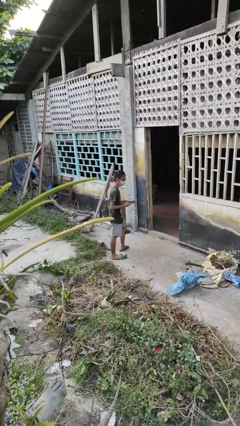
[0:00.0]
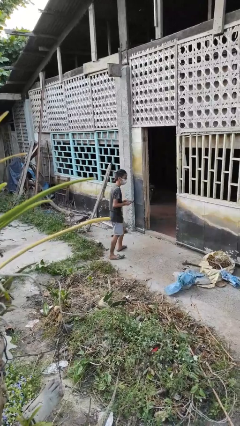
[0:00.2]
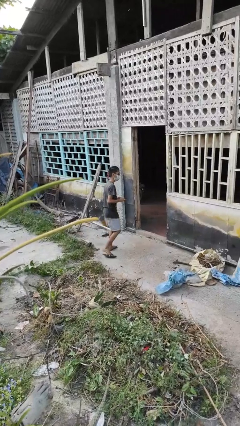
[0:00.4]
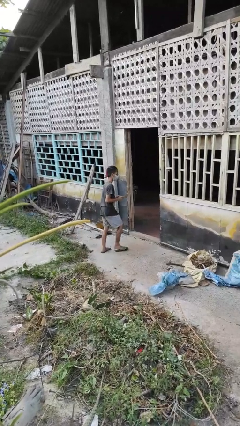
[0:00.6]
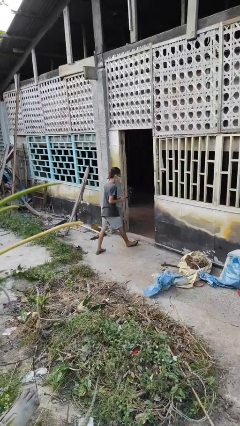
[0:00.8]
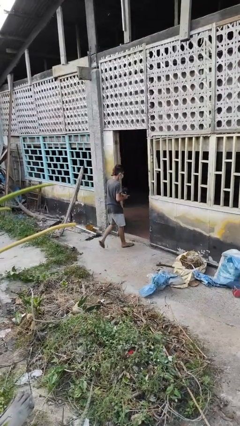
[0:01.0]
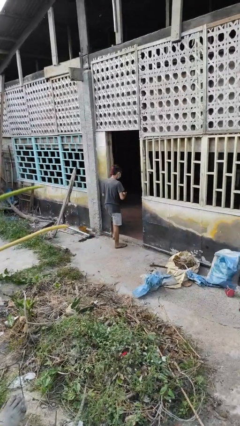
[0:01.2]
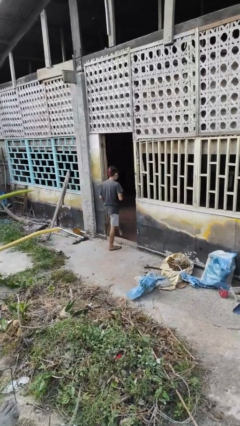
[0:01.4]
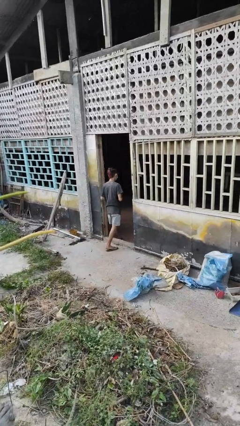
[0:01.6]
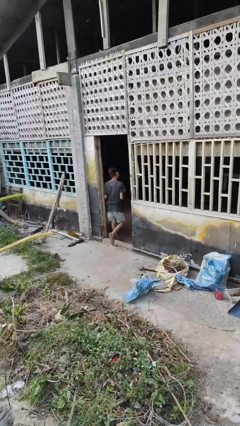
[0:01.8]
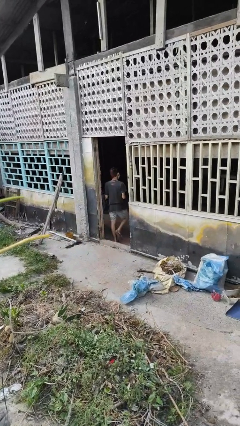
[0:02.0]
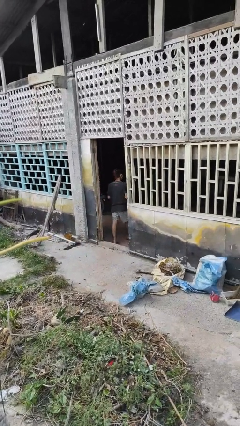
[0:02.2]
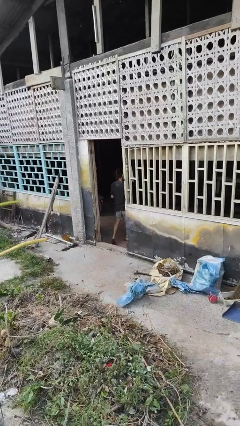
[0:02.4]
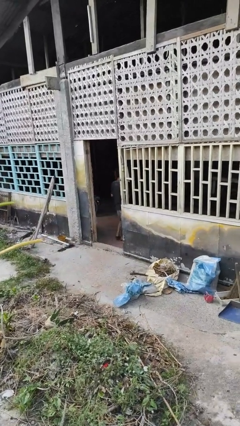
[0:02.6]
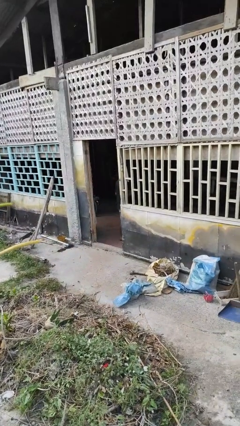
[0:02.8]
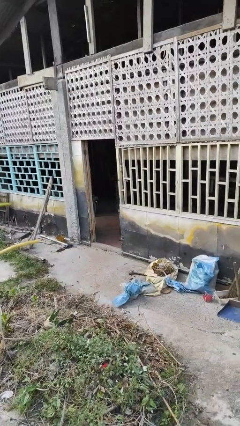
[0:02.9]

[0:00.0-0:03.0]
person exits scene through structure

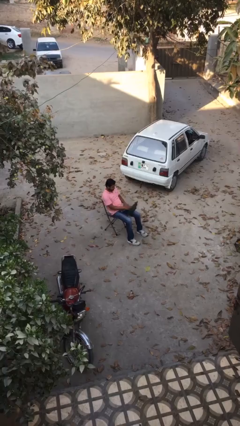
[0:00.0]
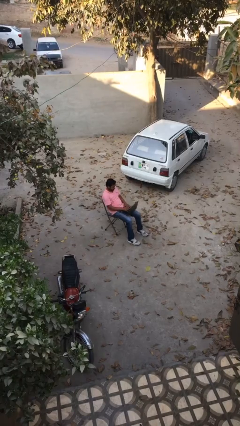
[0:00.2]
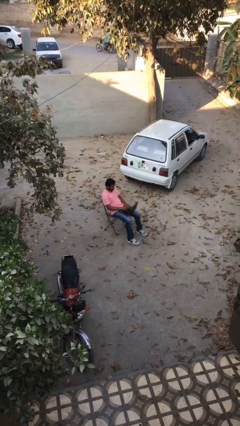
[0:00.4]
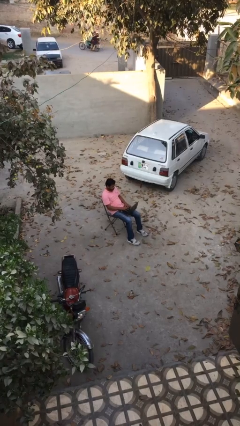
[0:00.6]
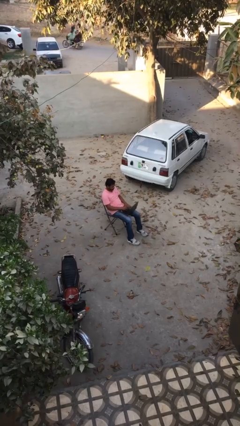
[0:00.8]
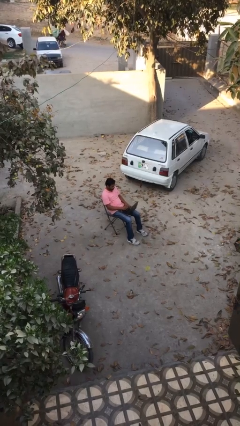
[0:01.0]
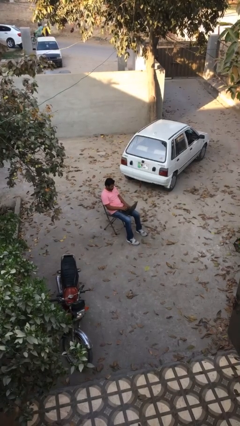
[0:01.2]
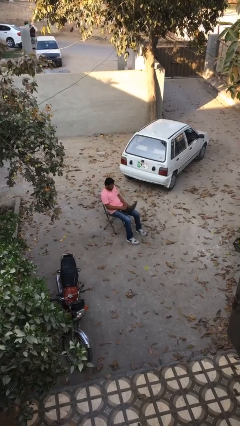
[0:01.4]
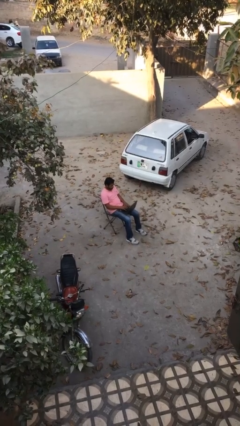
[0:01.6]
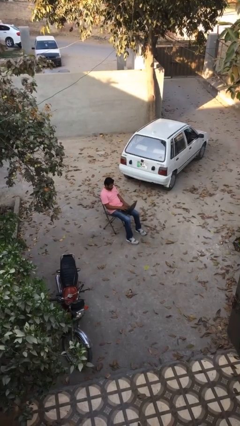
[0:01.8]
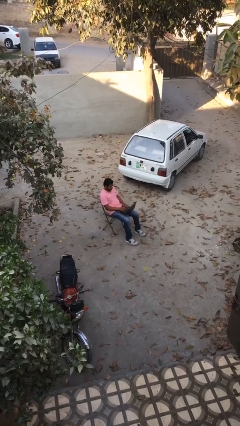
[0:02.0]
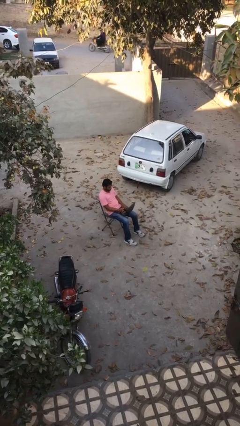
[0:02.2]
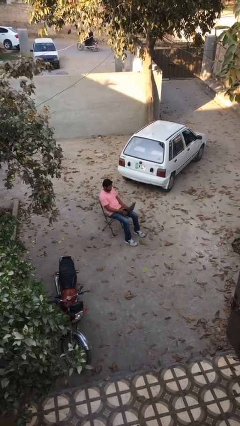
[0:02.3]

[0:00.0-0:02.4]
person interacts with laptop

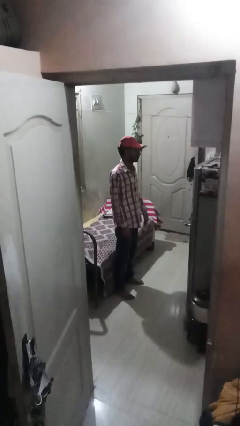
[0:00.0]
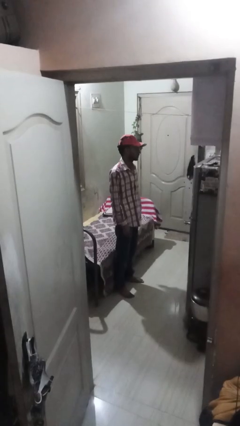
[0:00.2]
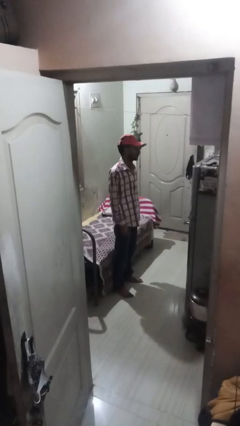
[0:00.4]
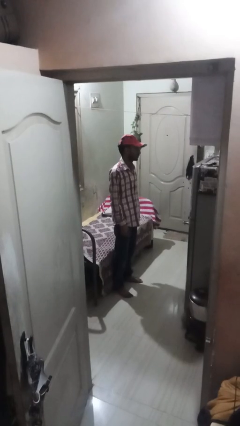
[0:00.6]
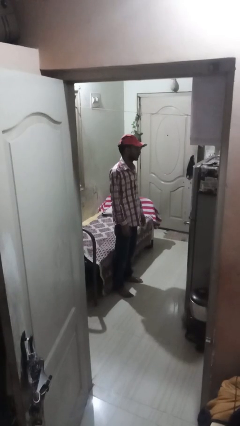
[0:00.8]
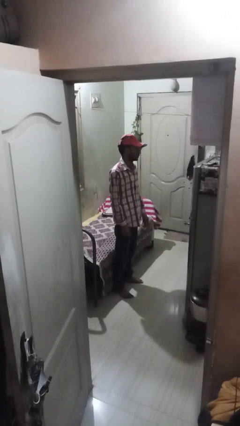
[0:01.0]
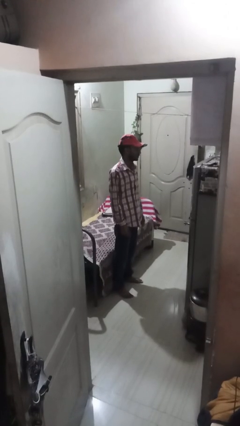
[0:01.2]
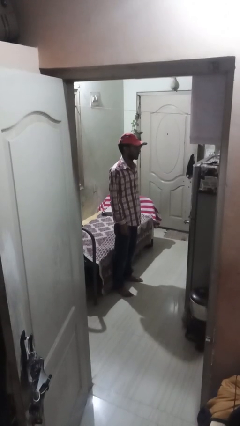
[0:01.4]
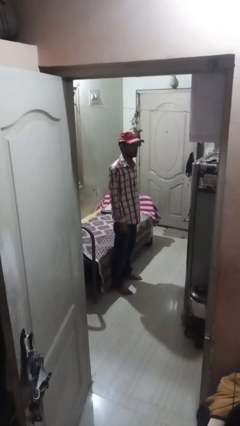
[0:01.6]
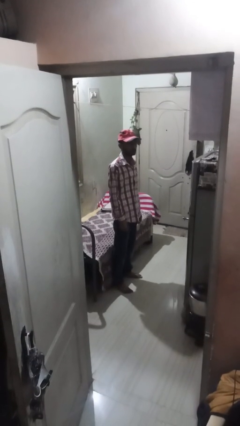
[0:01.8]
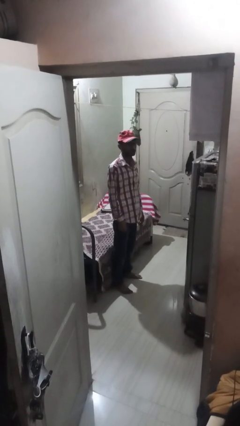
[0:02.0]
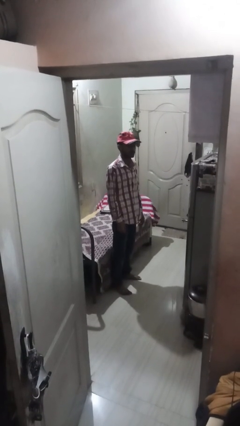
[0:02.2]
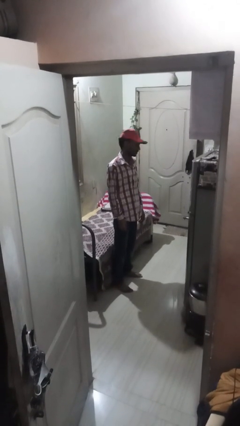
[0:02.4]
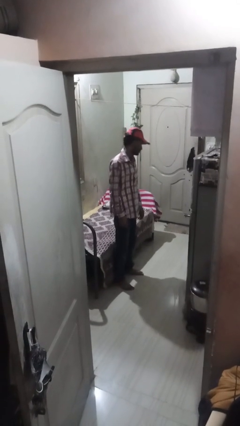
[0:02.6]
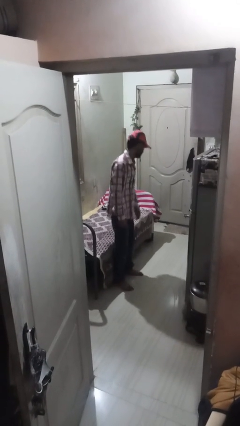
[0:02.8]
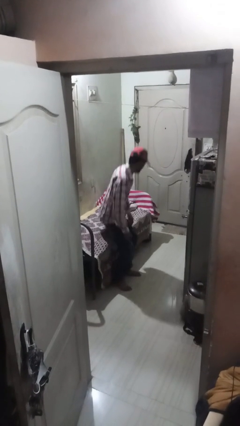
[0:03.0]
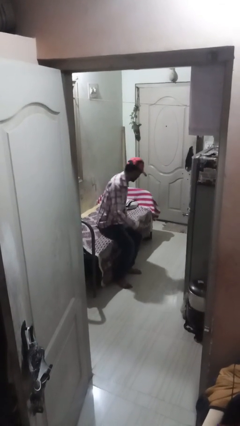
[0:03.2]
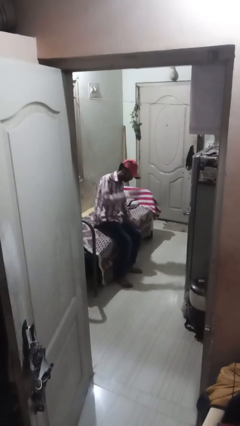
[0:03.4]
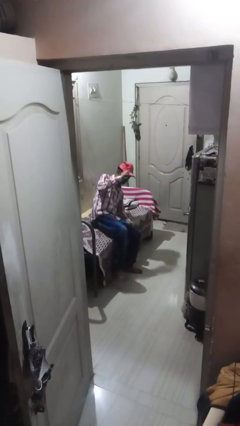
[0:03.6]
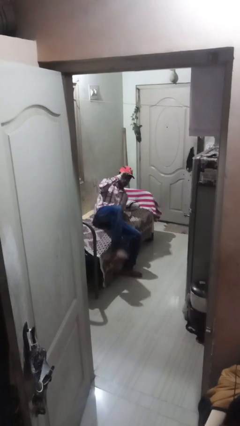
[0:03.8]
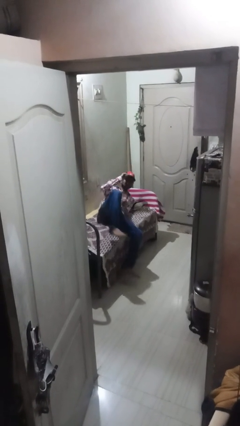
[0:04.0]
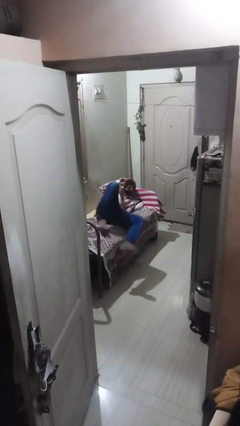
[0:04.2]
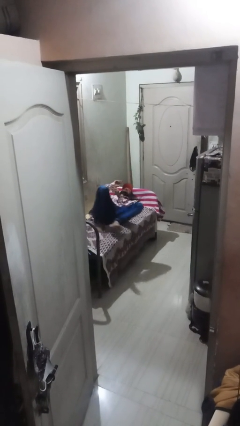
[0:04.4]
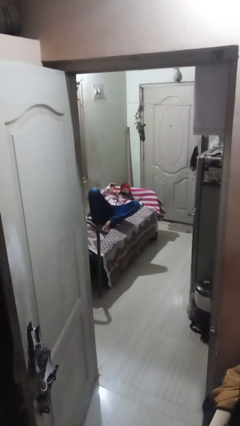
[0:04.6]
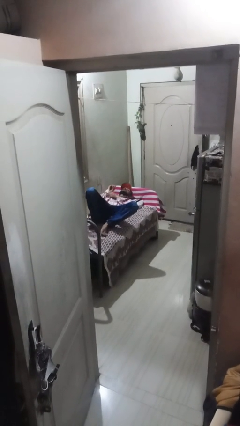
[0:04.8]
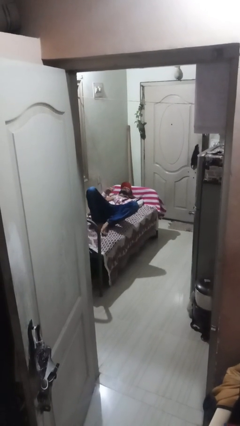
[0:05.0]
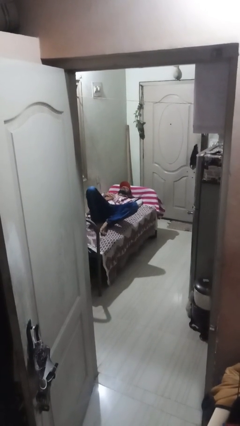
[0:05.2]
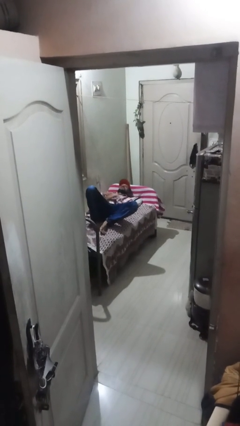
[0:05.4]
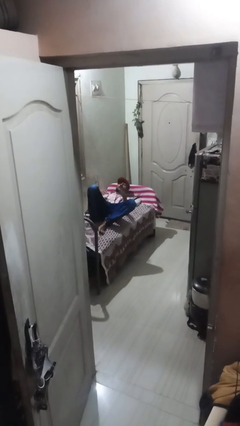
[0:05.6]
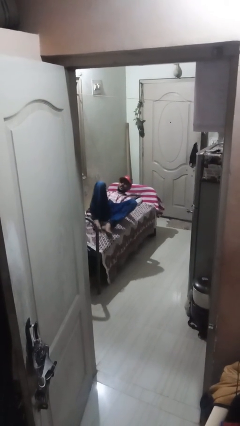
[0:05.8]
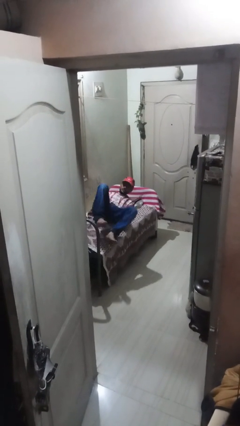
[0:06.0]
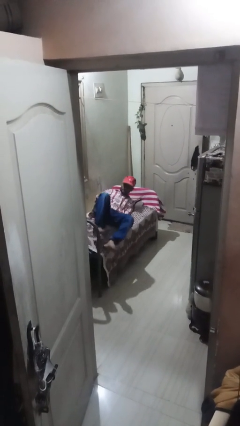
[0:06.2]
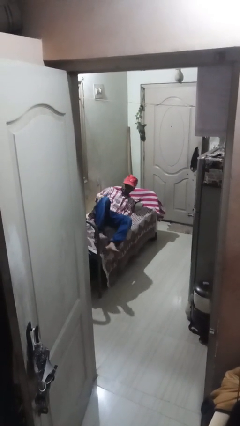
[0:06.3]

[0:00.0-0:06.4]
person lies down on couch

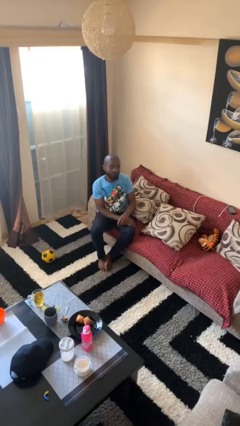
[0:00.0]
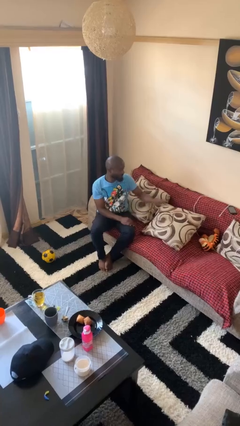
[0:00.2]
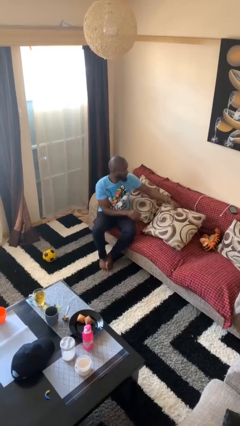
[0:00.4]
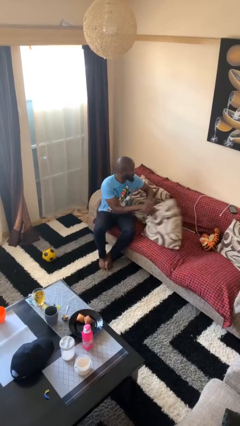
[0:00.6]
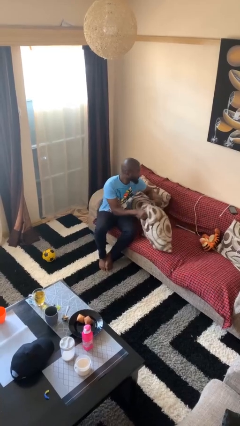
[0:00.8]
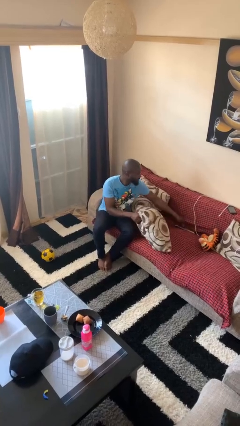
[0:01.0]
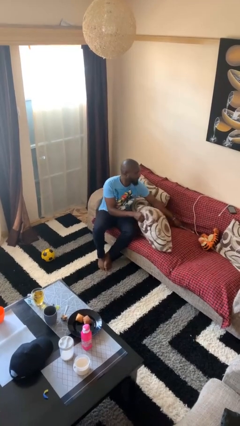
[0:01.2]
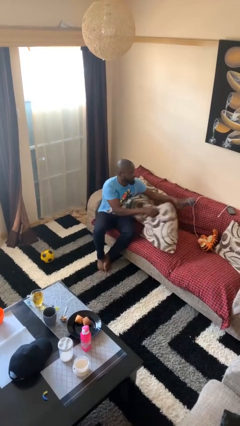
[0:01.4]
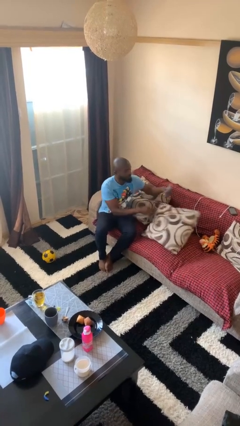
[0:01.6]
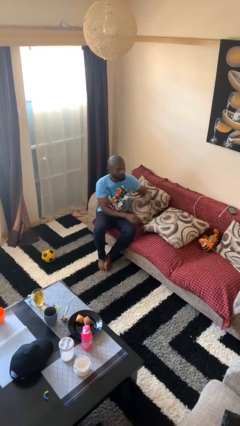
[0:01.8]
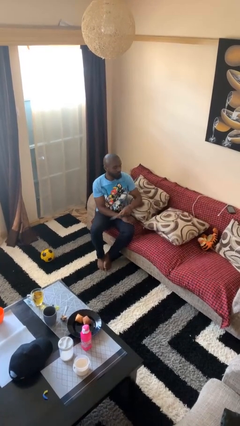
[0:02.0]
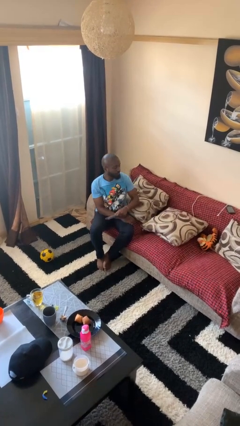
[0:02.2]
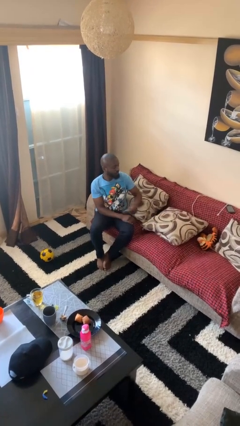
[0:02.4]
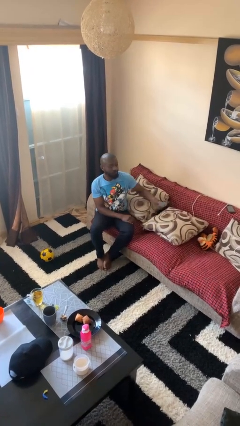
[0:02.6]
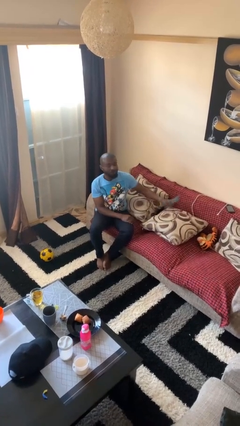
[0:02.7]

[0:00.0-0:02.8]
person searches in couch

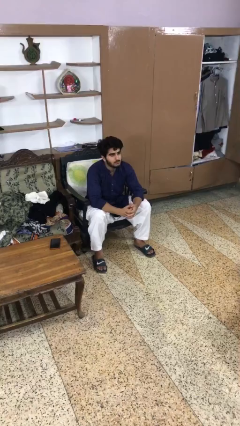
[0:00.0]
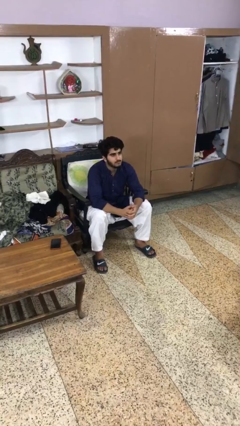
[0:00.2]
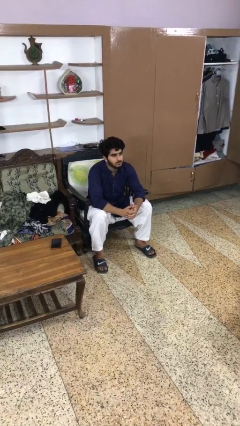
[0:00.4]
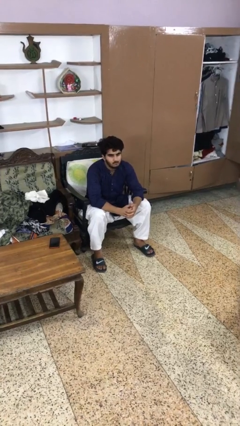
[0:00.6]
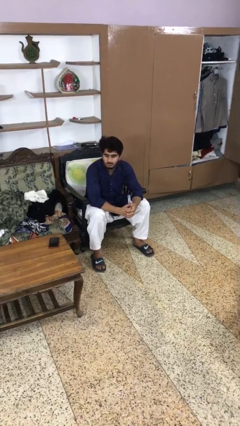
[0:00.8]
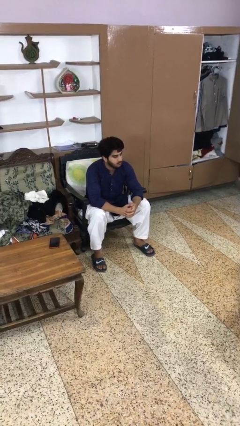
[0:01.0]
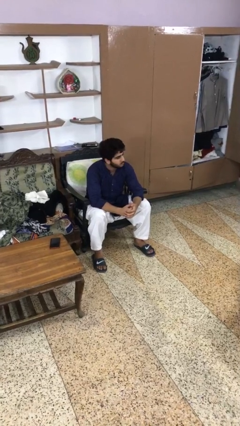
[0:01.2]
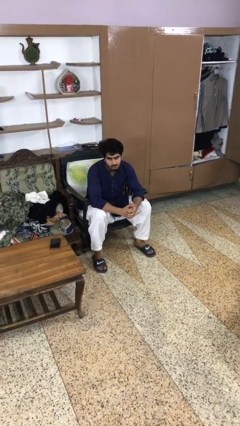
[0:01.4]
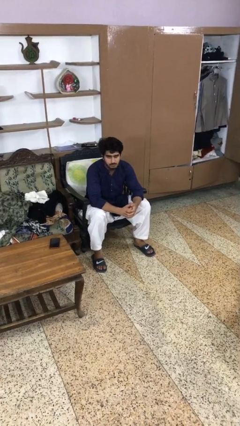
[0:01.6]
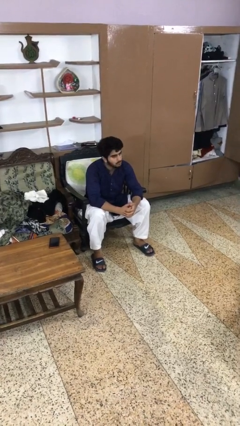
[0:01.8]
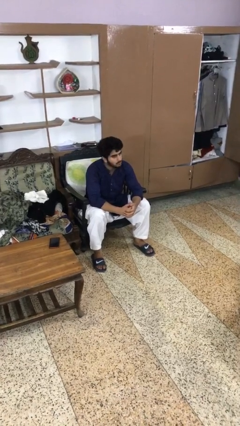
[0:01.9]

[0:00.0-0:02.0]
person shakes head

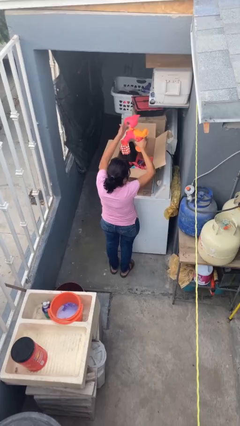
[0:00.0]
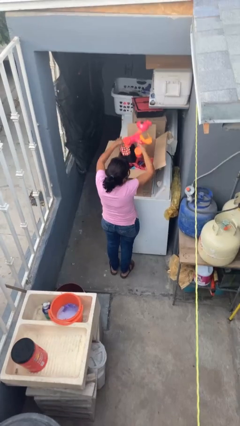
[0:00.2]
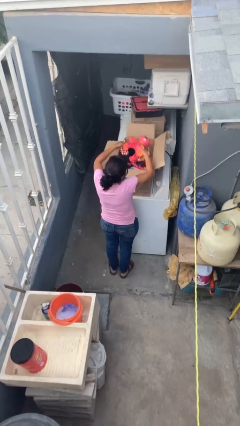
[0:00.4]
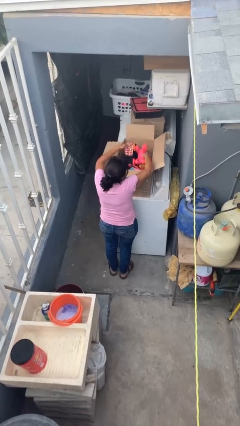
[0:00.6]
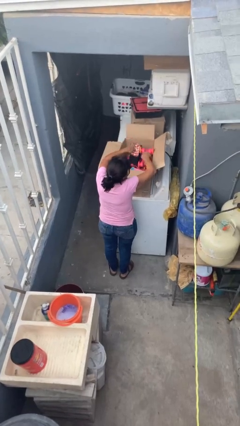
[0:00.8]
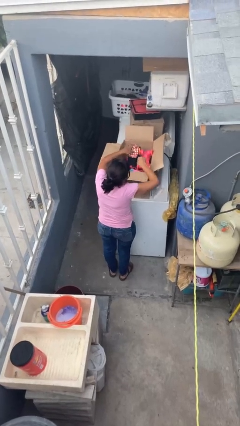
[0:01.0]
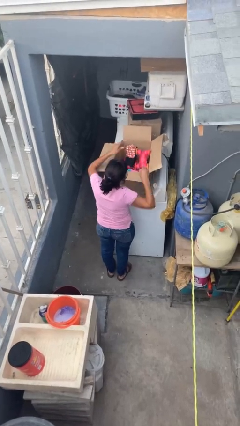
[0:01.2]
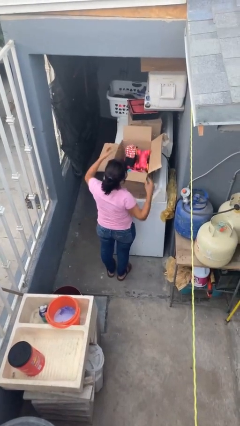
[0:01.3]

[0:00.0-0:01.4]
person puts object into box
